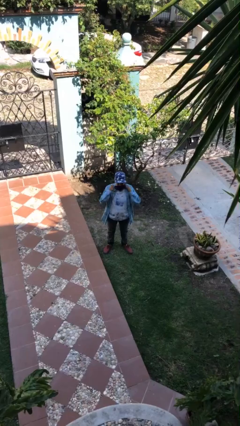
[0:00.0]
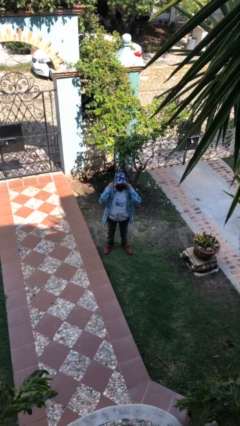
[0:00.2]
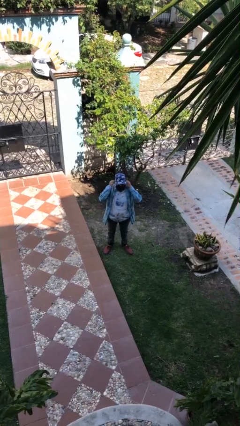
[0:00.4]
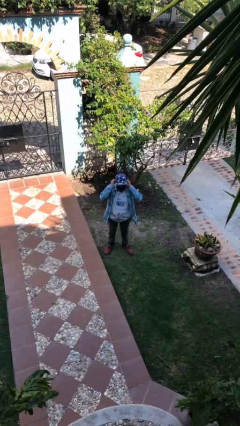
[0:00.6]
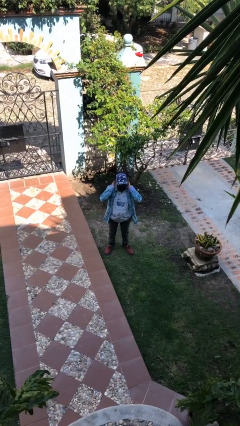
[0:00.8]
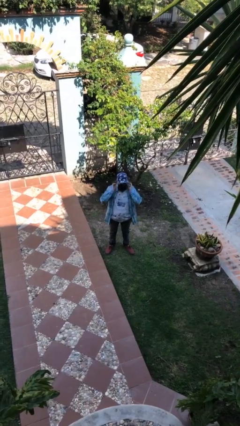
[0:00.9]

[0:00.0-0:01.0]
person puts on facemask

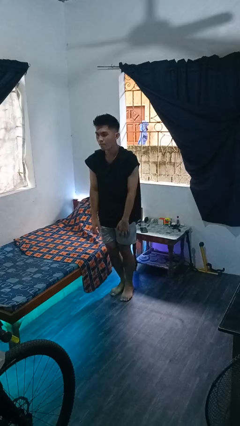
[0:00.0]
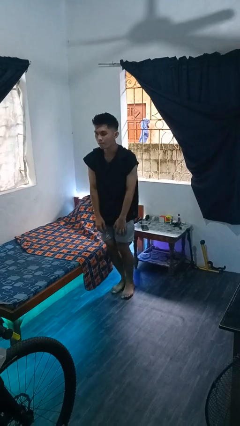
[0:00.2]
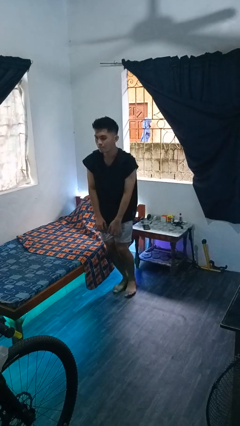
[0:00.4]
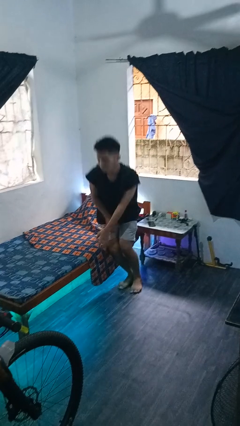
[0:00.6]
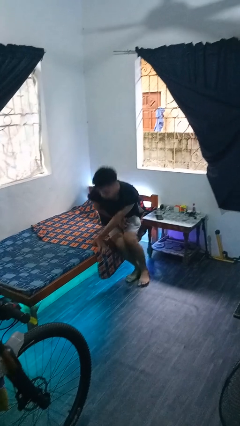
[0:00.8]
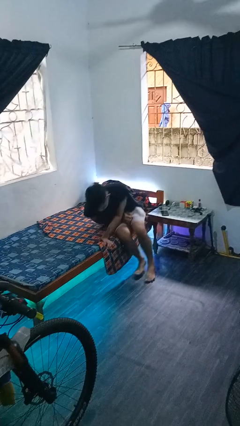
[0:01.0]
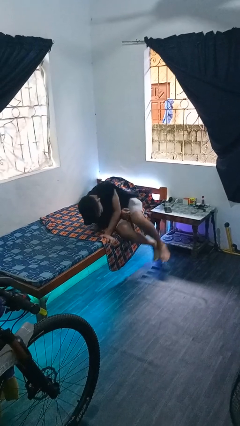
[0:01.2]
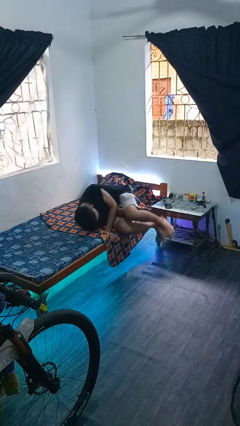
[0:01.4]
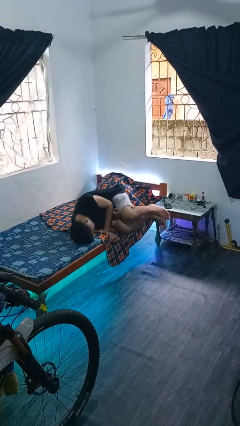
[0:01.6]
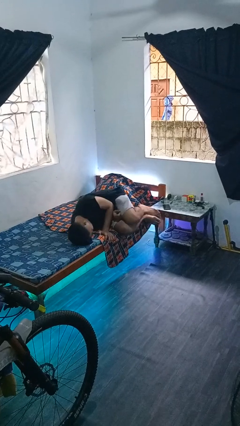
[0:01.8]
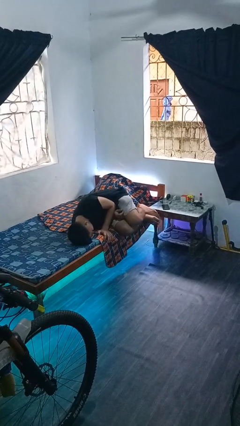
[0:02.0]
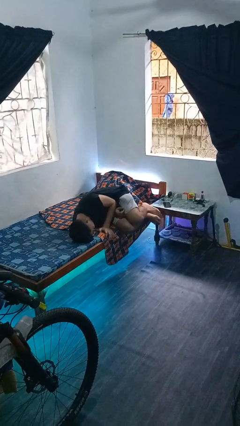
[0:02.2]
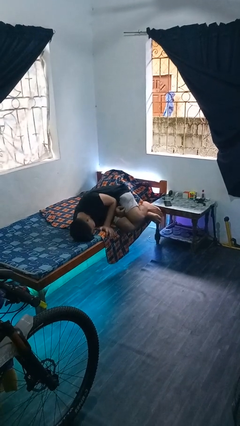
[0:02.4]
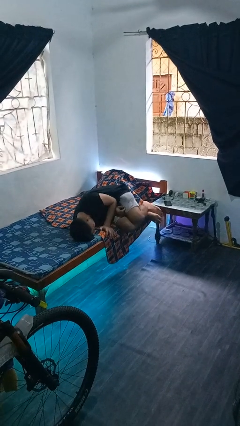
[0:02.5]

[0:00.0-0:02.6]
person lies down on bed

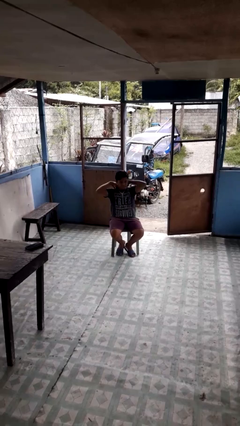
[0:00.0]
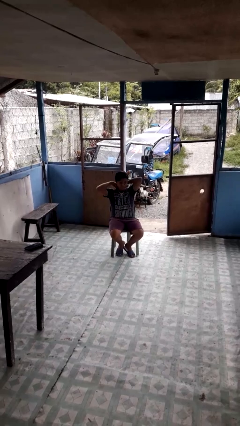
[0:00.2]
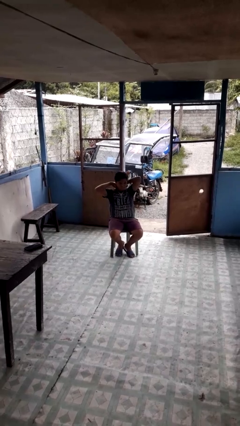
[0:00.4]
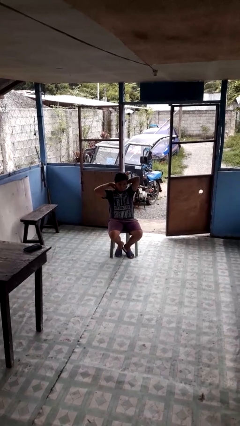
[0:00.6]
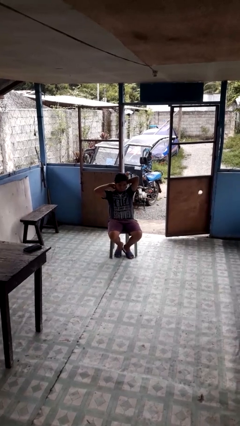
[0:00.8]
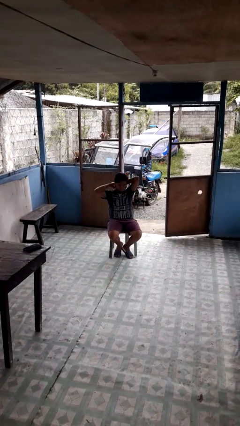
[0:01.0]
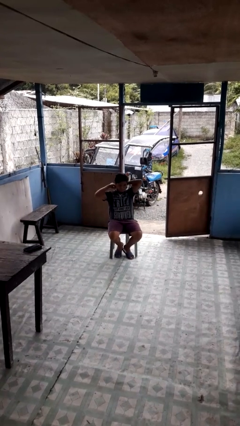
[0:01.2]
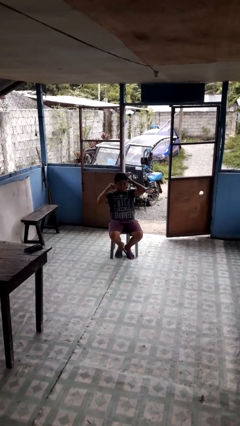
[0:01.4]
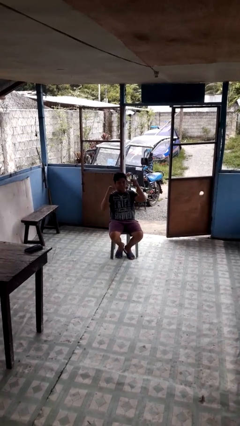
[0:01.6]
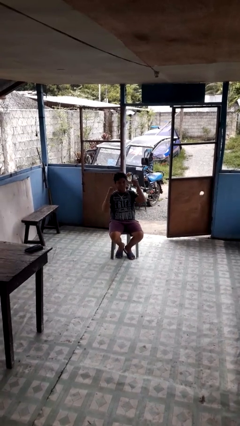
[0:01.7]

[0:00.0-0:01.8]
person takes off necklace

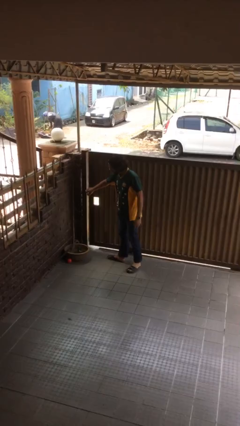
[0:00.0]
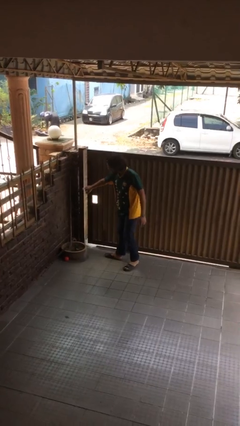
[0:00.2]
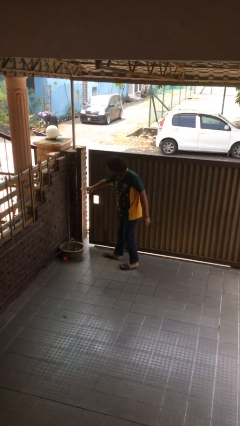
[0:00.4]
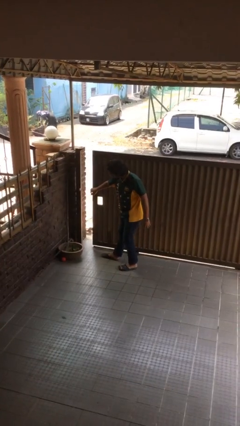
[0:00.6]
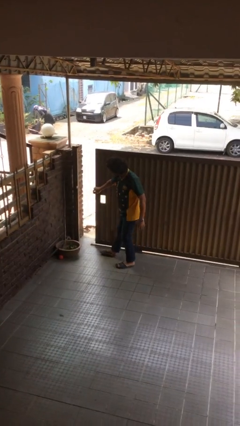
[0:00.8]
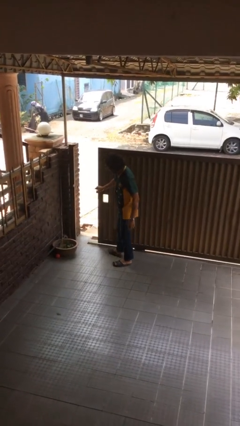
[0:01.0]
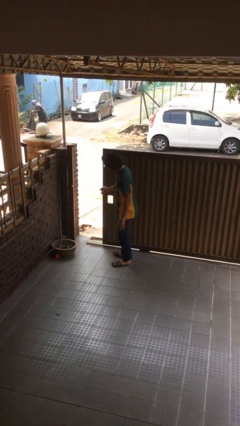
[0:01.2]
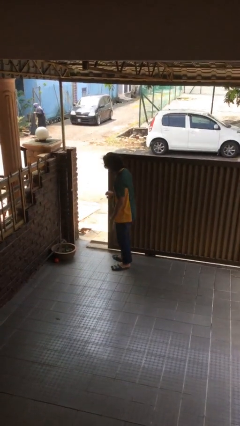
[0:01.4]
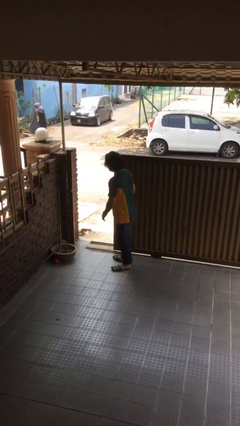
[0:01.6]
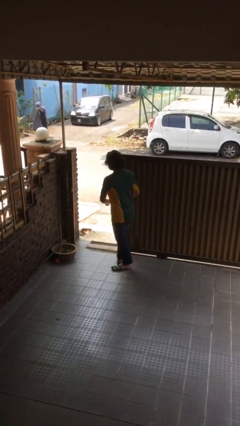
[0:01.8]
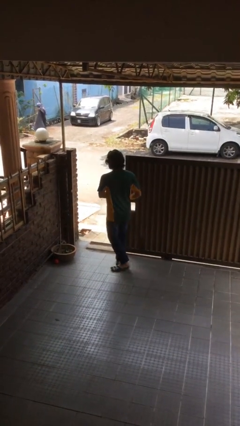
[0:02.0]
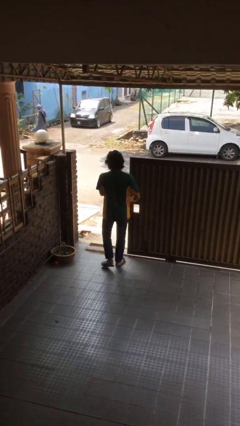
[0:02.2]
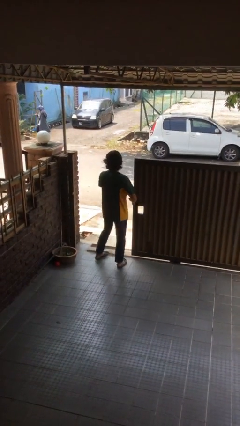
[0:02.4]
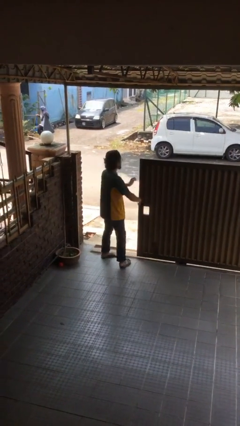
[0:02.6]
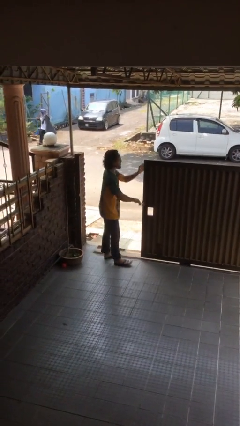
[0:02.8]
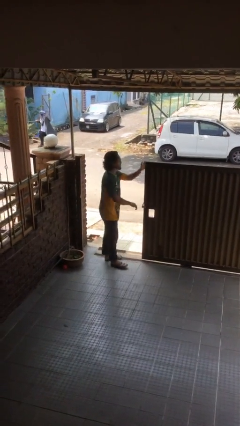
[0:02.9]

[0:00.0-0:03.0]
person opens facility door

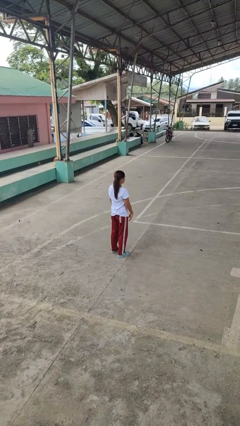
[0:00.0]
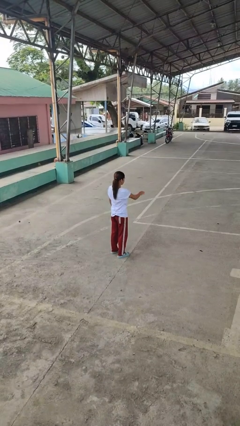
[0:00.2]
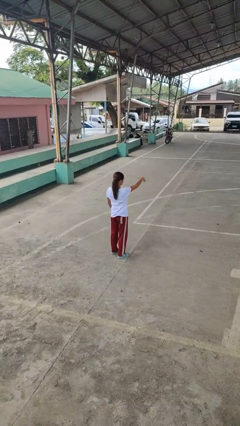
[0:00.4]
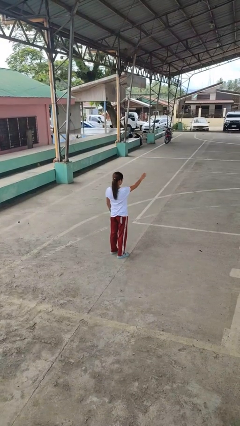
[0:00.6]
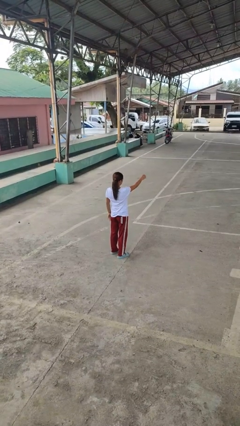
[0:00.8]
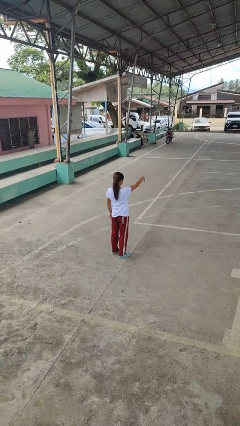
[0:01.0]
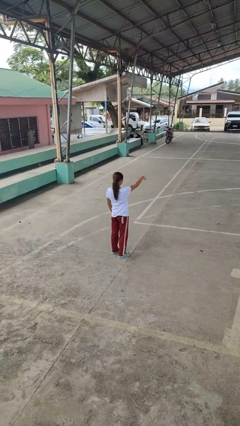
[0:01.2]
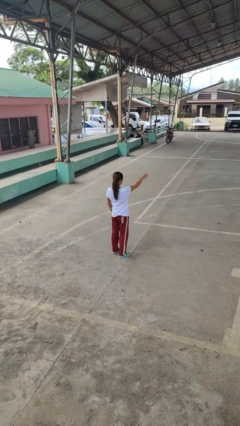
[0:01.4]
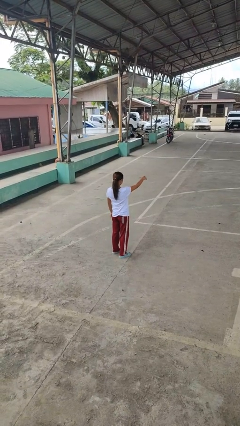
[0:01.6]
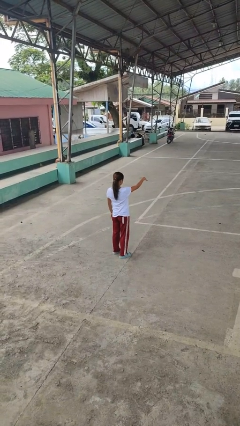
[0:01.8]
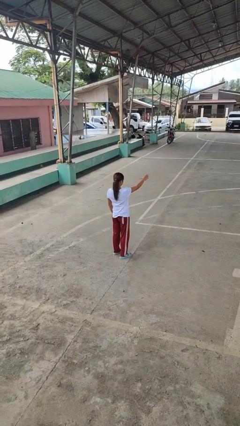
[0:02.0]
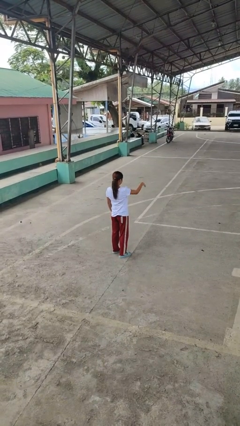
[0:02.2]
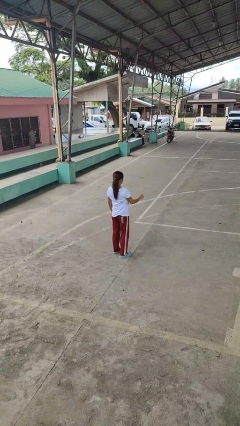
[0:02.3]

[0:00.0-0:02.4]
person gestures come here

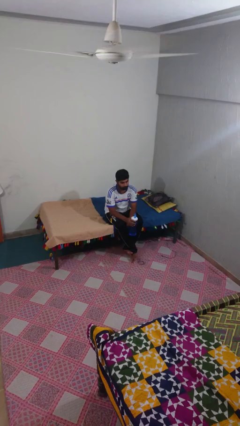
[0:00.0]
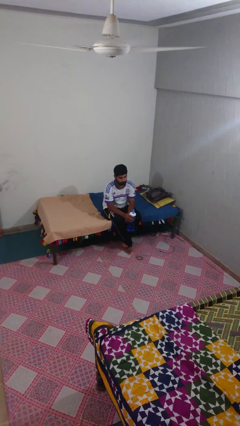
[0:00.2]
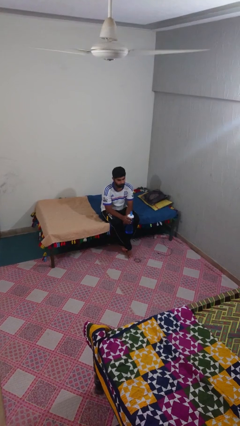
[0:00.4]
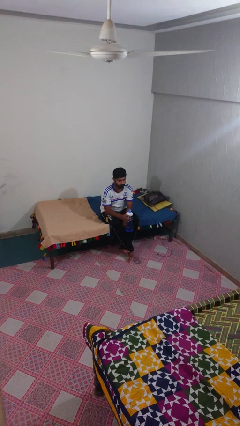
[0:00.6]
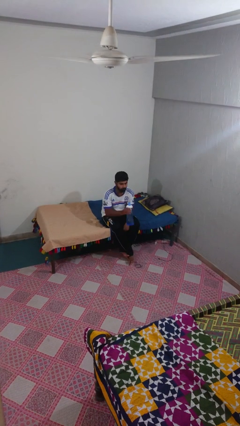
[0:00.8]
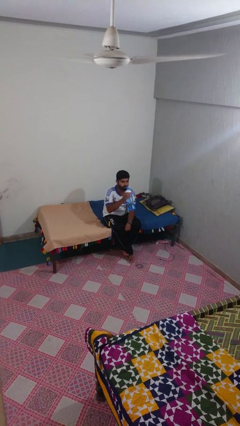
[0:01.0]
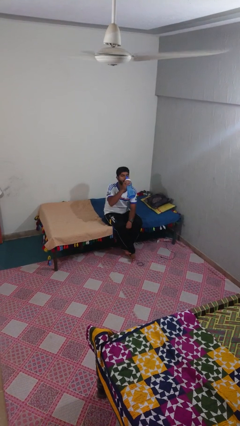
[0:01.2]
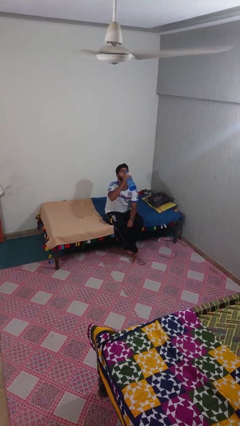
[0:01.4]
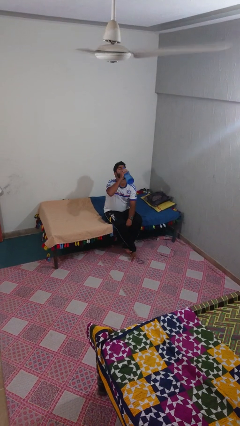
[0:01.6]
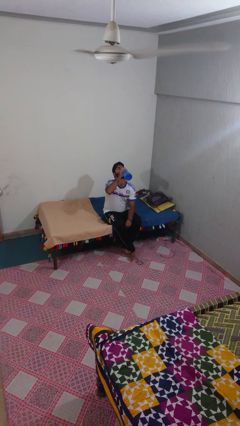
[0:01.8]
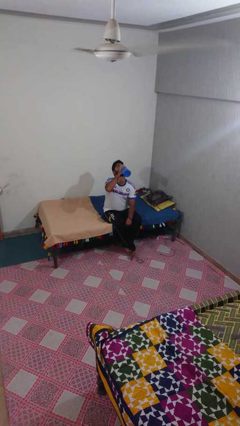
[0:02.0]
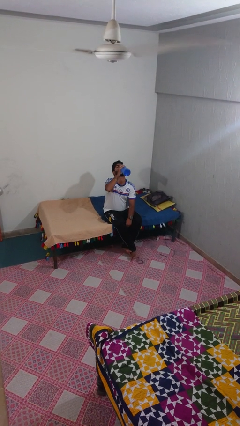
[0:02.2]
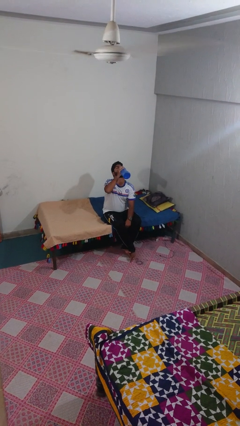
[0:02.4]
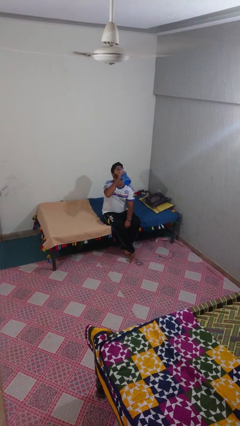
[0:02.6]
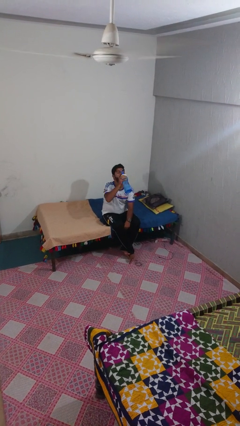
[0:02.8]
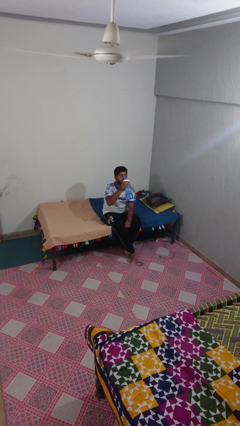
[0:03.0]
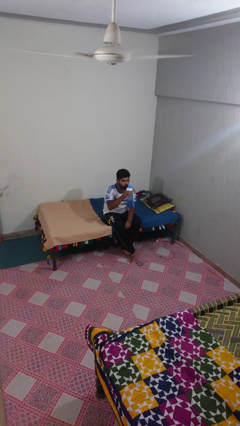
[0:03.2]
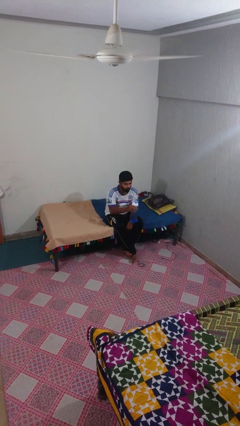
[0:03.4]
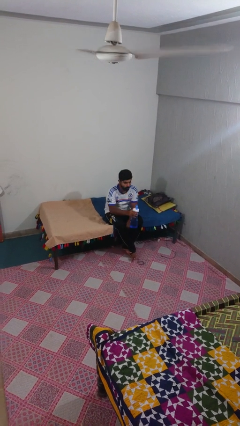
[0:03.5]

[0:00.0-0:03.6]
person drinks from bottle

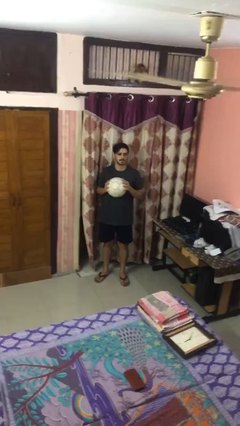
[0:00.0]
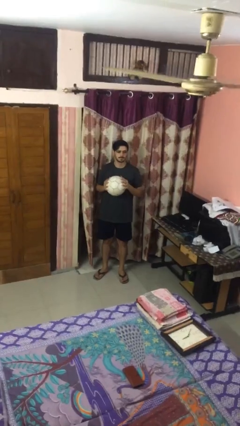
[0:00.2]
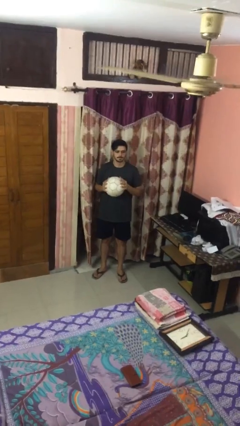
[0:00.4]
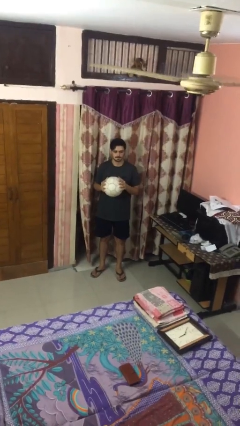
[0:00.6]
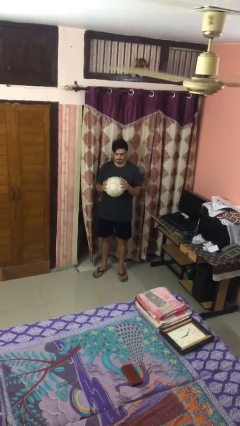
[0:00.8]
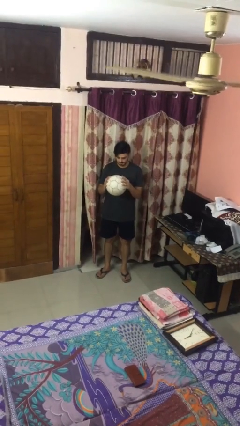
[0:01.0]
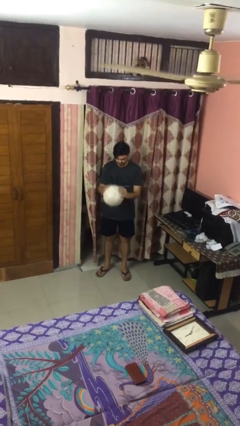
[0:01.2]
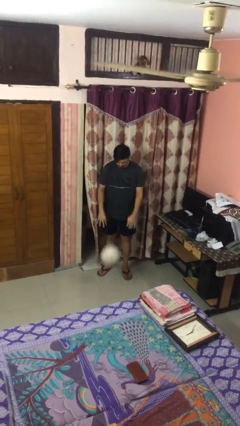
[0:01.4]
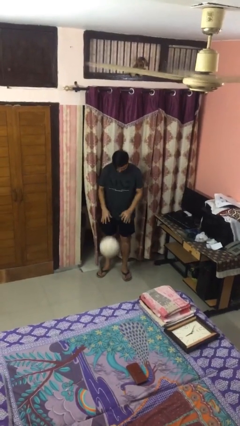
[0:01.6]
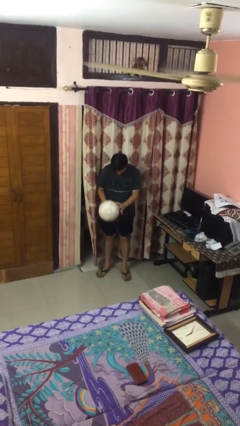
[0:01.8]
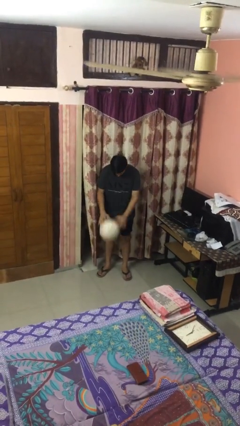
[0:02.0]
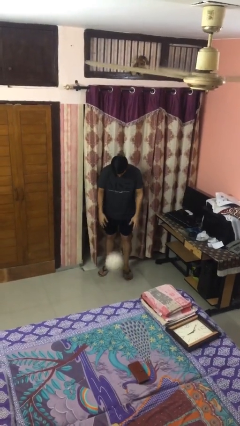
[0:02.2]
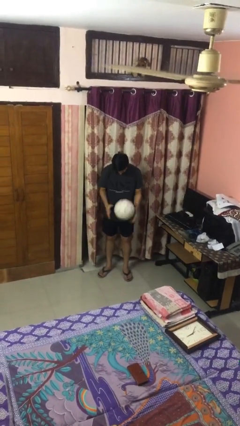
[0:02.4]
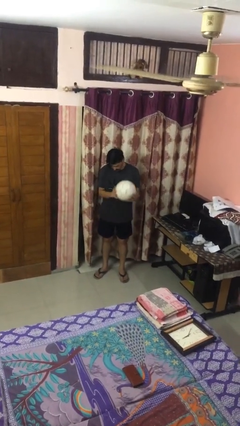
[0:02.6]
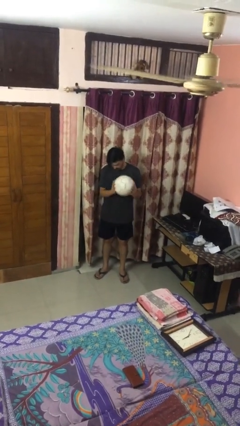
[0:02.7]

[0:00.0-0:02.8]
person bounces ball on floor
